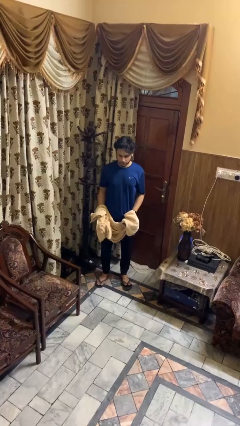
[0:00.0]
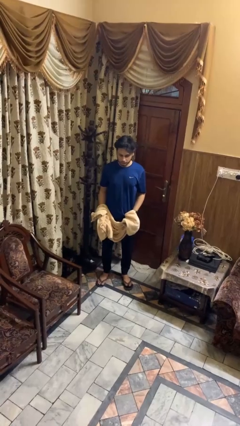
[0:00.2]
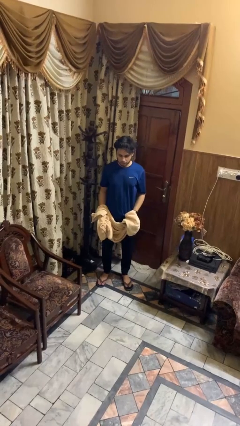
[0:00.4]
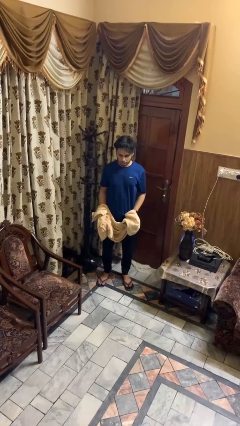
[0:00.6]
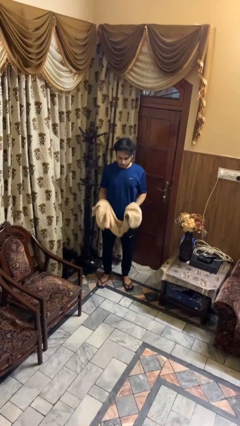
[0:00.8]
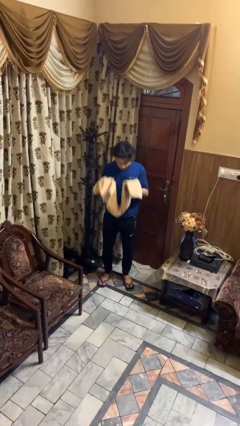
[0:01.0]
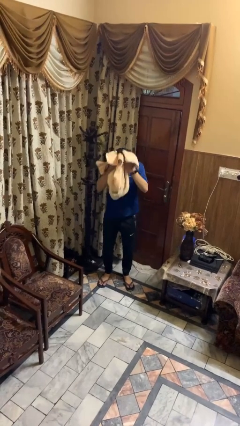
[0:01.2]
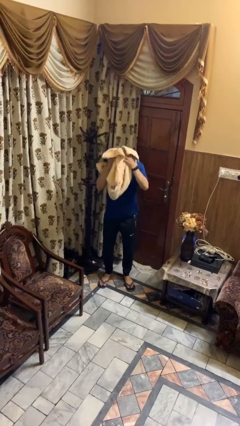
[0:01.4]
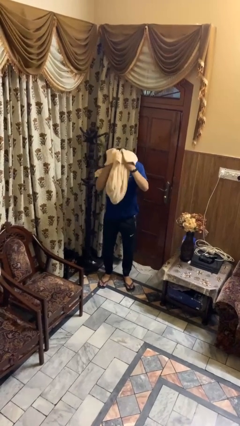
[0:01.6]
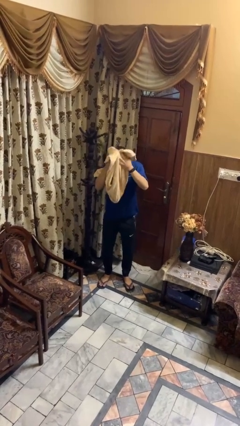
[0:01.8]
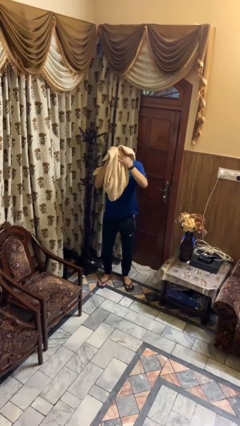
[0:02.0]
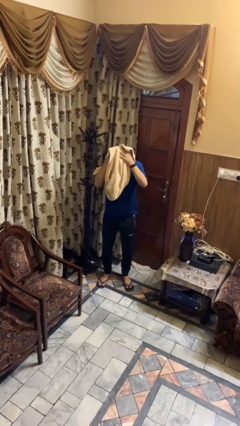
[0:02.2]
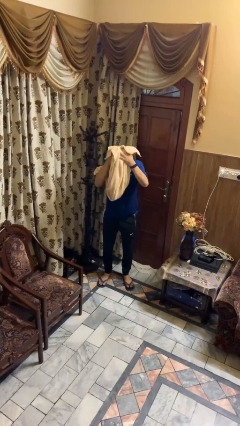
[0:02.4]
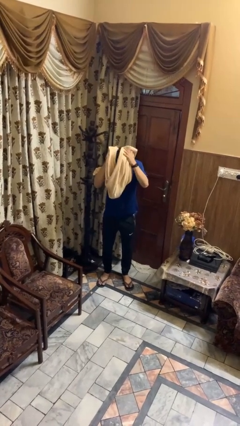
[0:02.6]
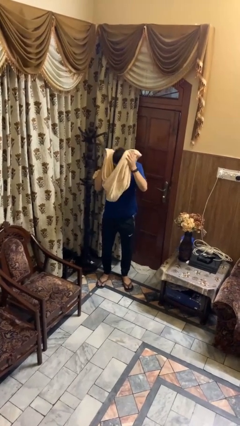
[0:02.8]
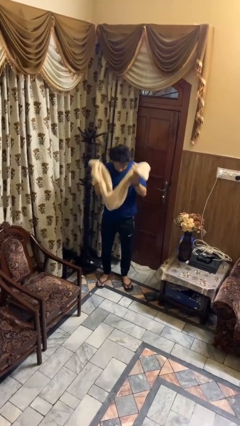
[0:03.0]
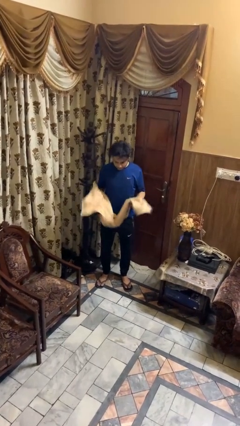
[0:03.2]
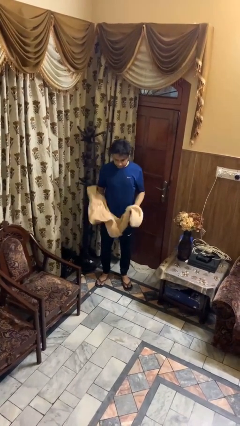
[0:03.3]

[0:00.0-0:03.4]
person dries hair with towel

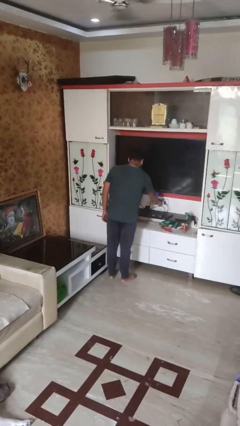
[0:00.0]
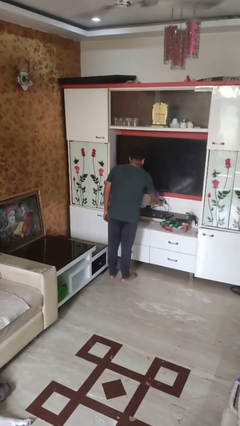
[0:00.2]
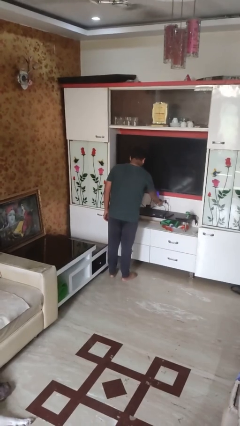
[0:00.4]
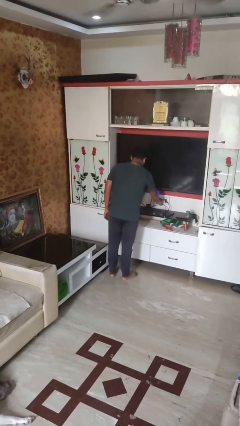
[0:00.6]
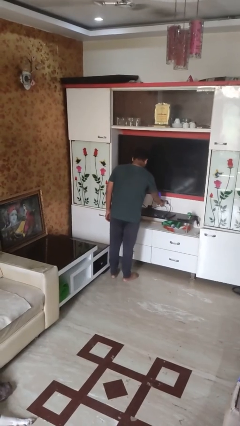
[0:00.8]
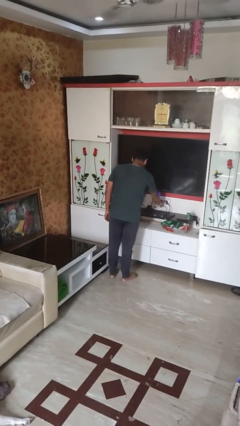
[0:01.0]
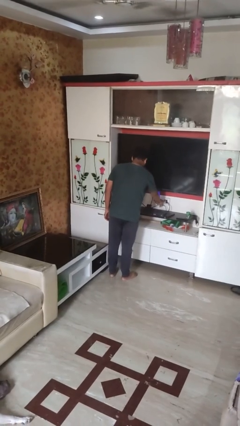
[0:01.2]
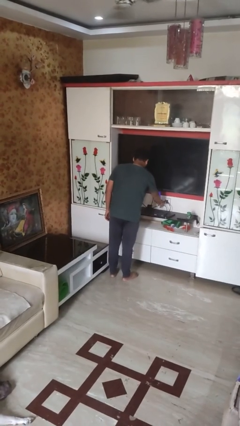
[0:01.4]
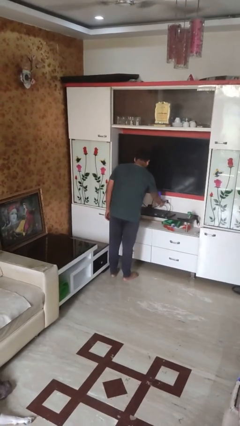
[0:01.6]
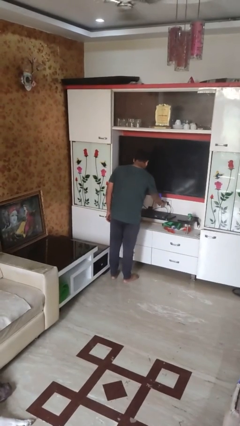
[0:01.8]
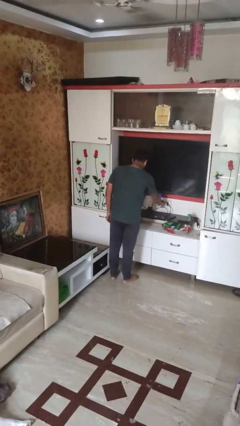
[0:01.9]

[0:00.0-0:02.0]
person turns off lamp

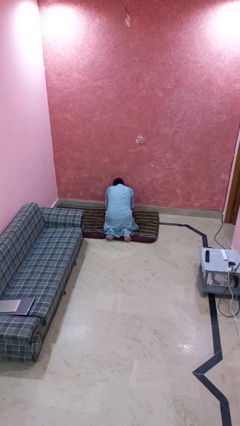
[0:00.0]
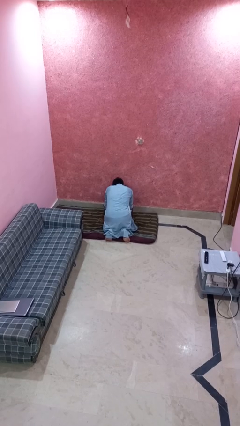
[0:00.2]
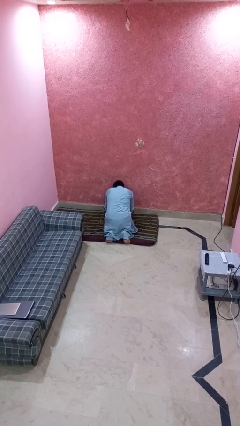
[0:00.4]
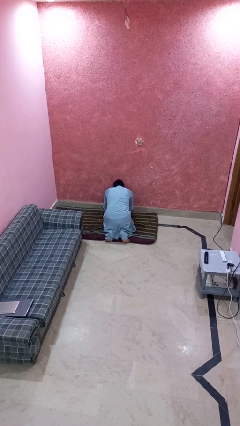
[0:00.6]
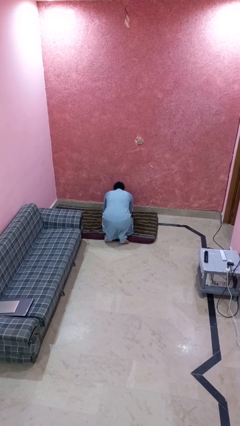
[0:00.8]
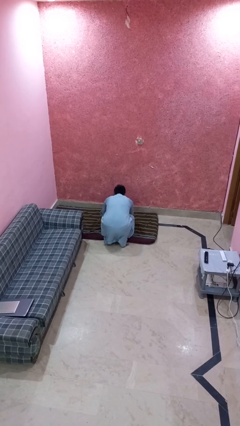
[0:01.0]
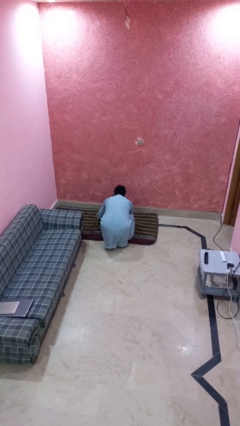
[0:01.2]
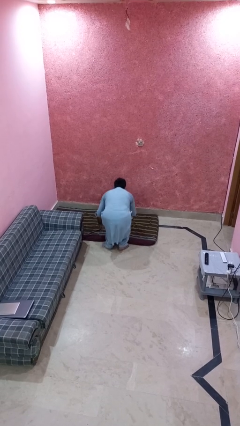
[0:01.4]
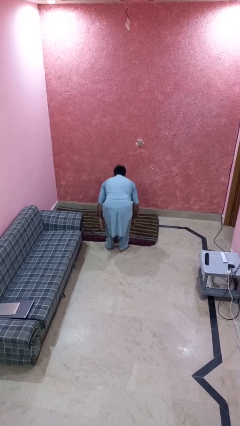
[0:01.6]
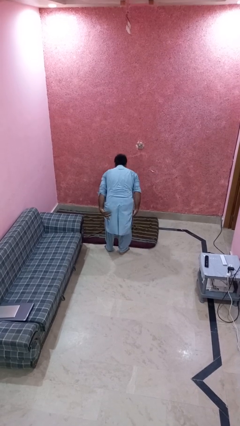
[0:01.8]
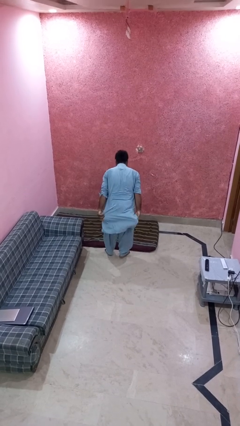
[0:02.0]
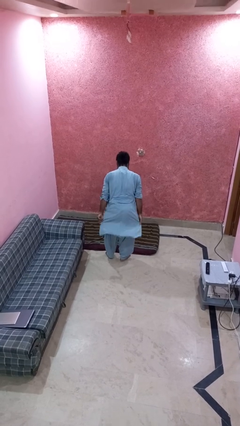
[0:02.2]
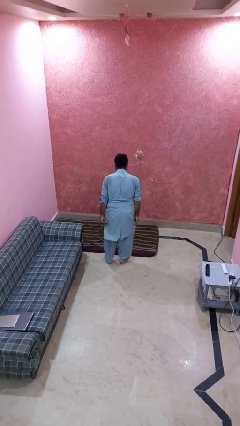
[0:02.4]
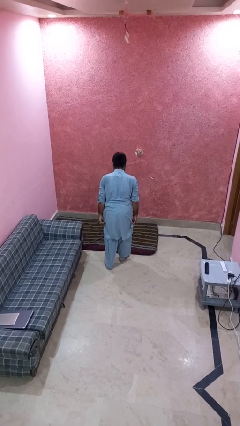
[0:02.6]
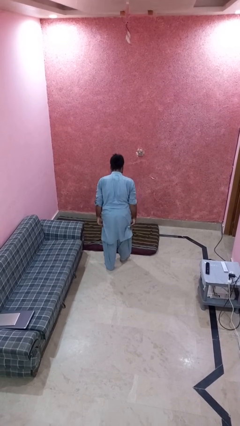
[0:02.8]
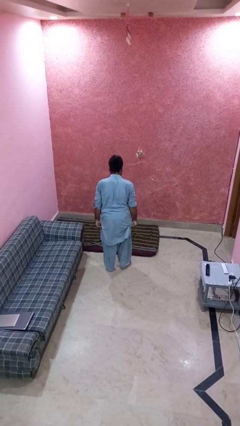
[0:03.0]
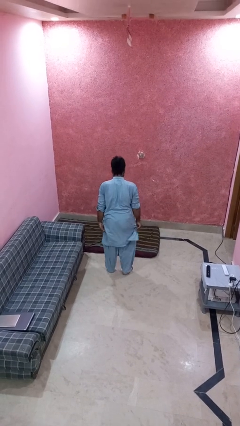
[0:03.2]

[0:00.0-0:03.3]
person stands up from floor

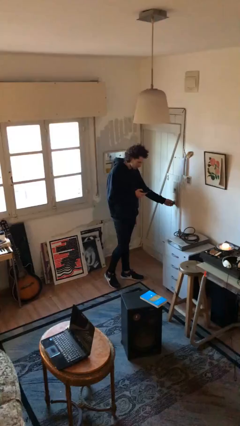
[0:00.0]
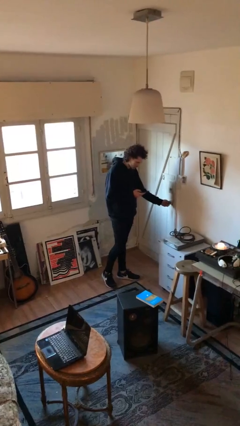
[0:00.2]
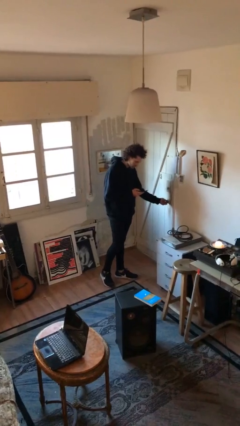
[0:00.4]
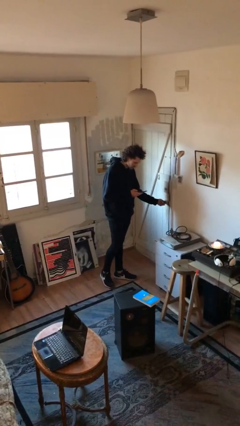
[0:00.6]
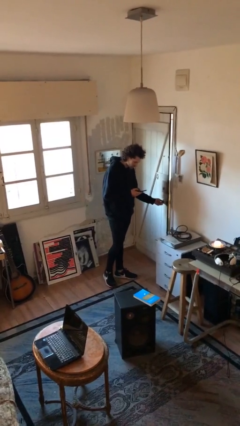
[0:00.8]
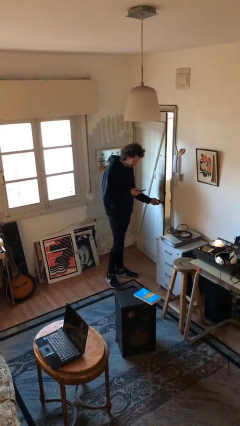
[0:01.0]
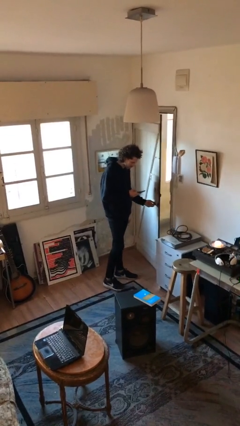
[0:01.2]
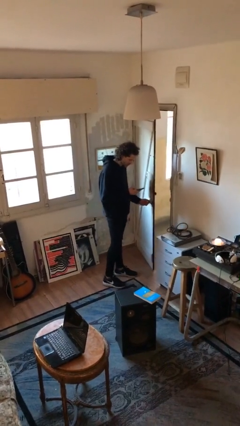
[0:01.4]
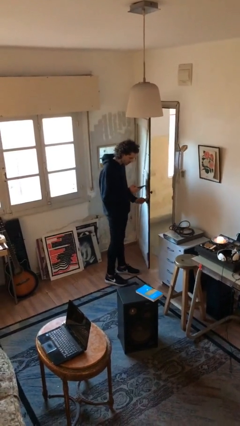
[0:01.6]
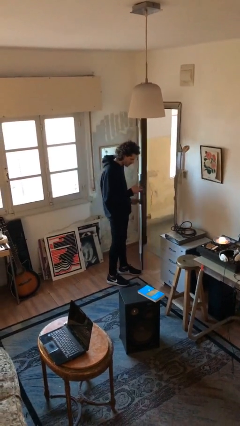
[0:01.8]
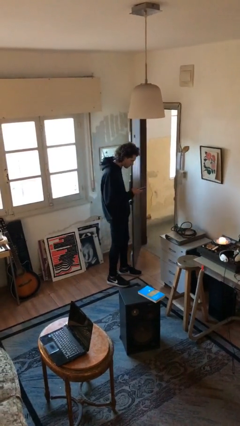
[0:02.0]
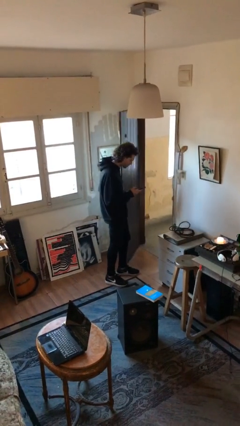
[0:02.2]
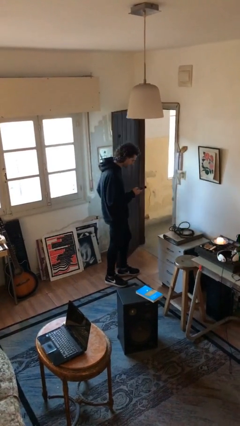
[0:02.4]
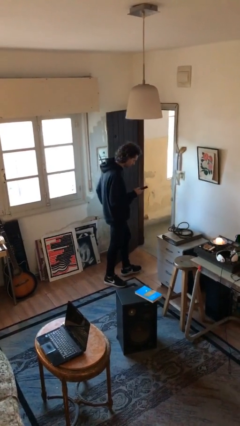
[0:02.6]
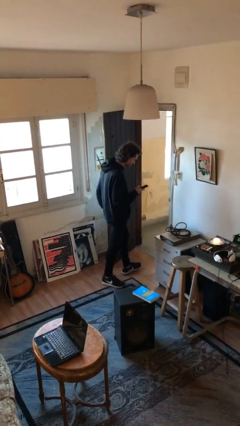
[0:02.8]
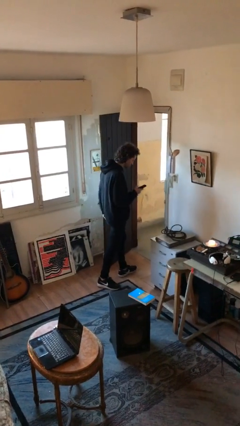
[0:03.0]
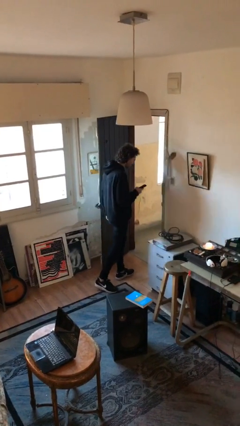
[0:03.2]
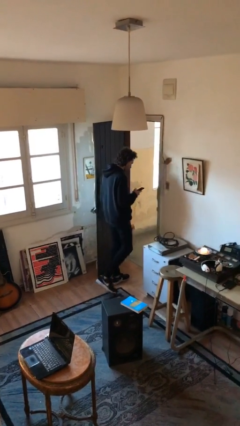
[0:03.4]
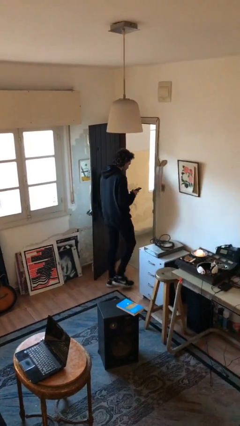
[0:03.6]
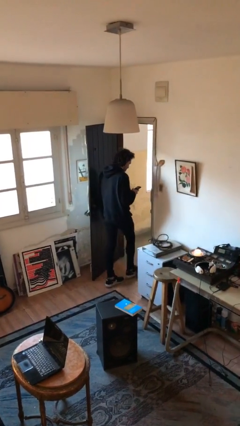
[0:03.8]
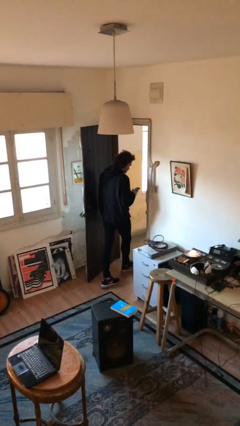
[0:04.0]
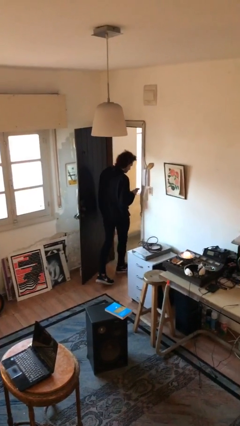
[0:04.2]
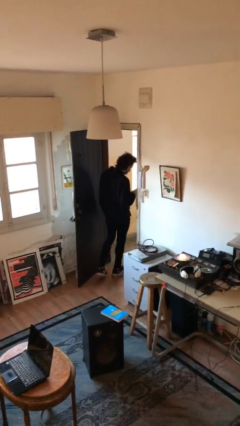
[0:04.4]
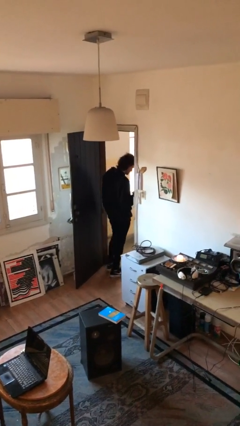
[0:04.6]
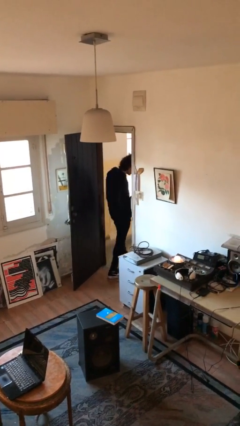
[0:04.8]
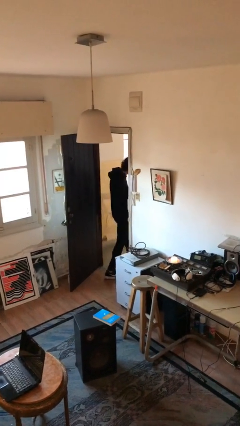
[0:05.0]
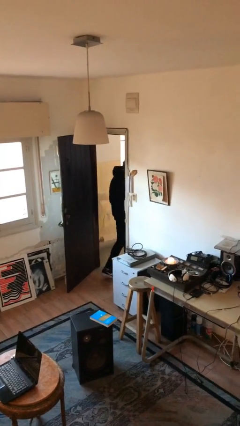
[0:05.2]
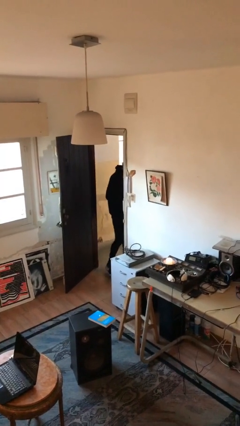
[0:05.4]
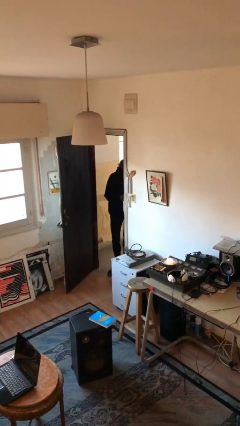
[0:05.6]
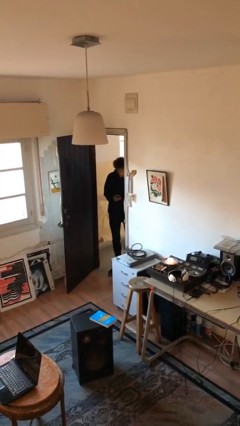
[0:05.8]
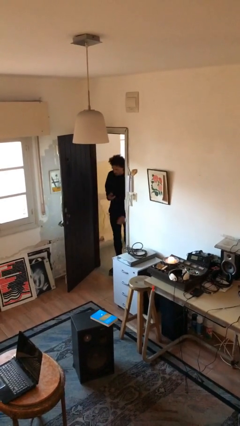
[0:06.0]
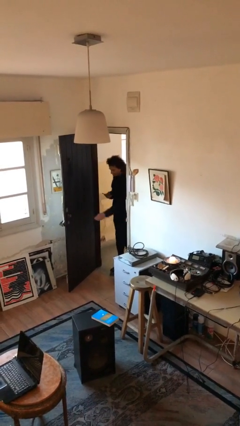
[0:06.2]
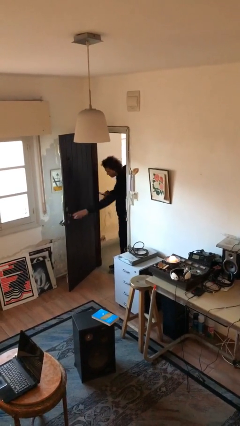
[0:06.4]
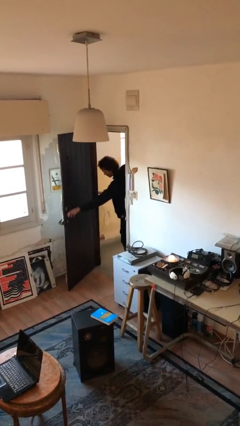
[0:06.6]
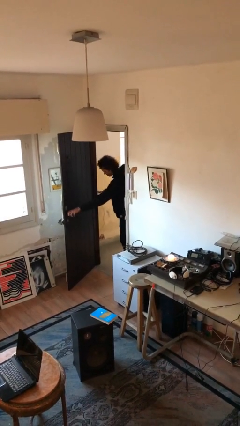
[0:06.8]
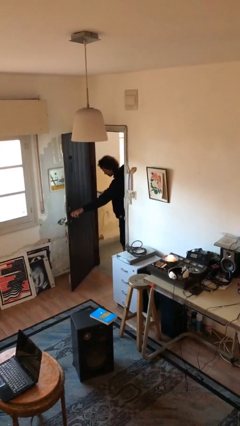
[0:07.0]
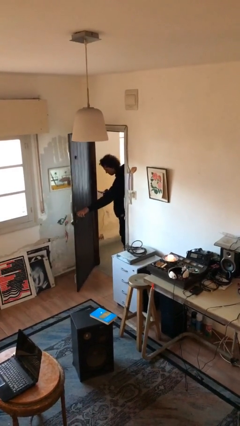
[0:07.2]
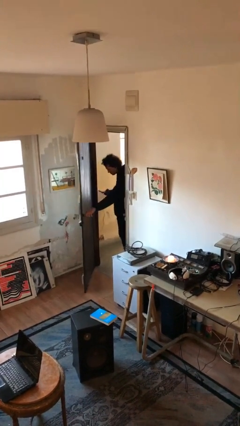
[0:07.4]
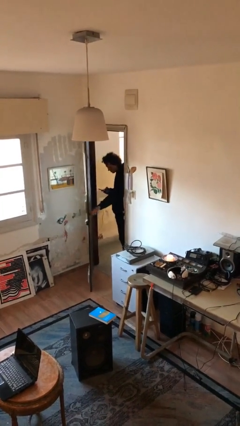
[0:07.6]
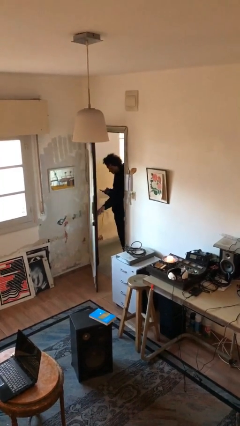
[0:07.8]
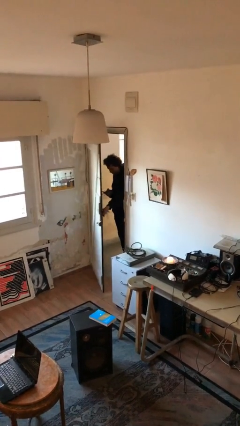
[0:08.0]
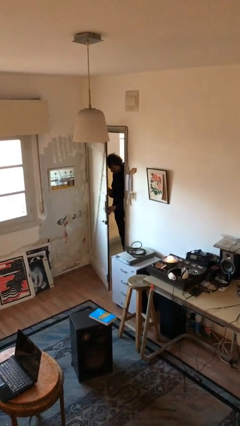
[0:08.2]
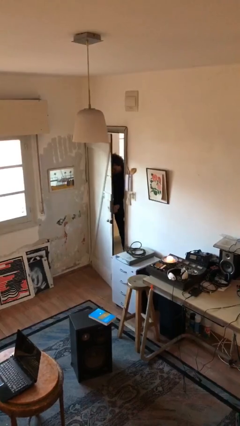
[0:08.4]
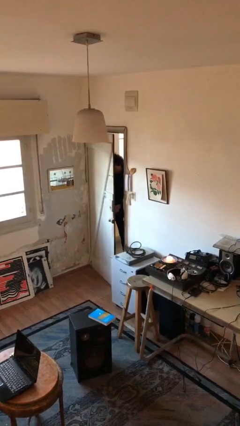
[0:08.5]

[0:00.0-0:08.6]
person texts on phone

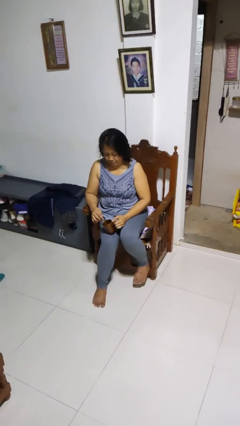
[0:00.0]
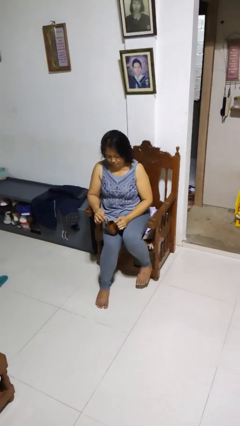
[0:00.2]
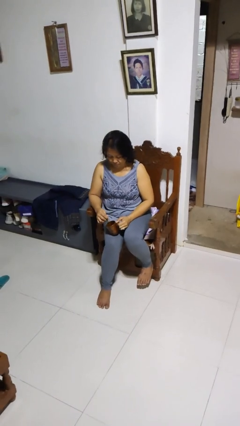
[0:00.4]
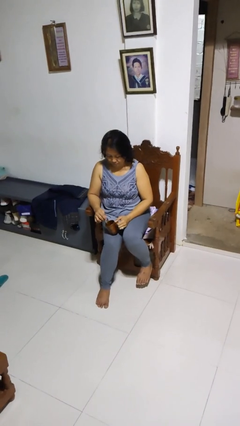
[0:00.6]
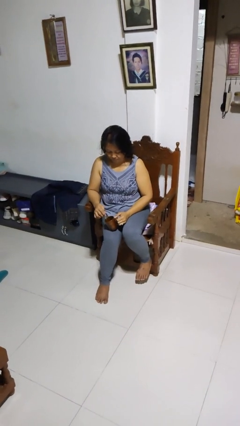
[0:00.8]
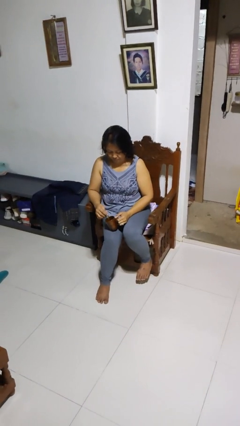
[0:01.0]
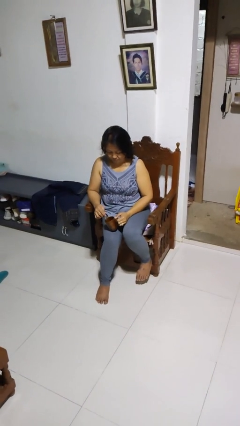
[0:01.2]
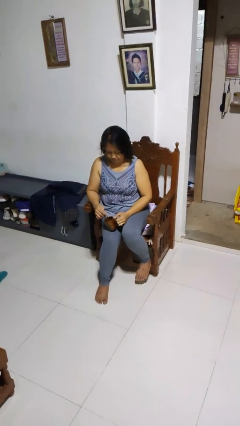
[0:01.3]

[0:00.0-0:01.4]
person stirs mug
